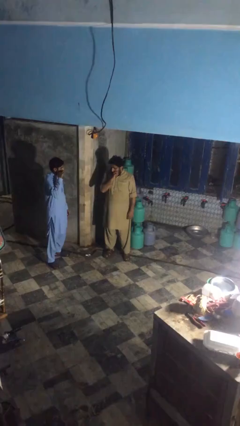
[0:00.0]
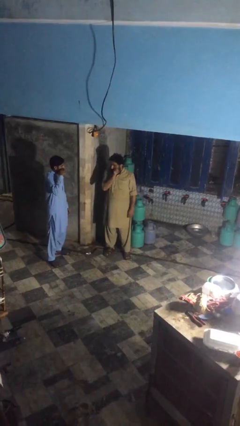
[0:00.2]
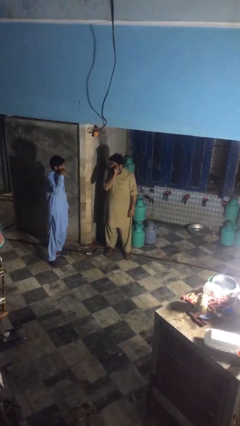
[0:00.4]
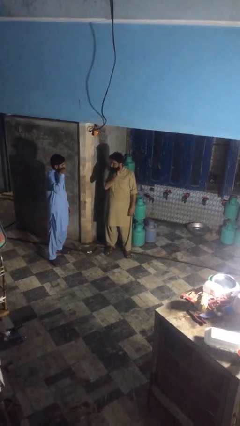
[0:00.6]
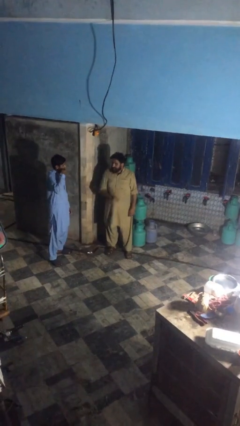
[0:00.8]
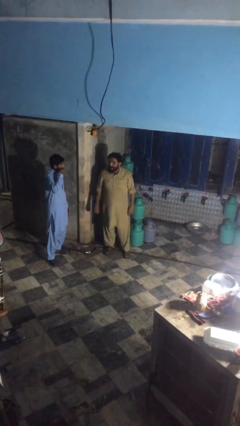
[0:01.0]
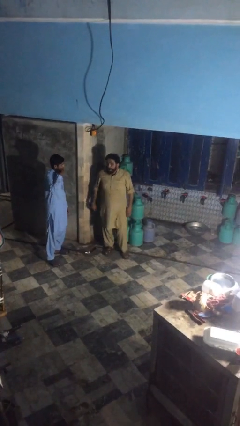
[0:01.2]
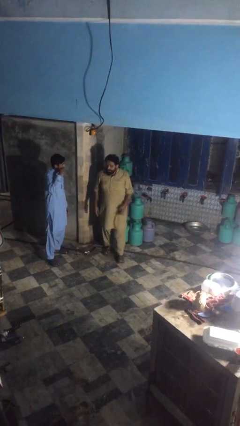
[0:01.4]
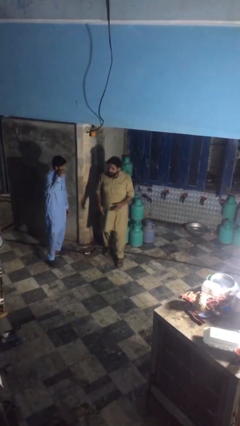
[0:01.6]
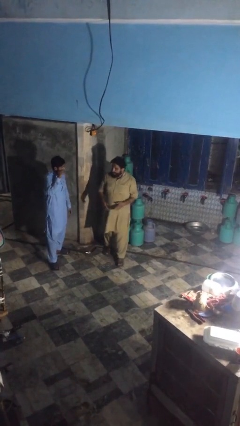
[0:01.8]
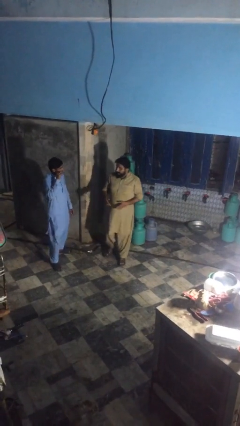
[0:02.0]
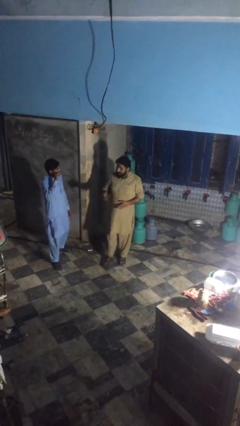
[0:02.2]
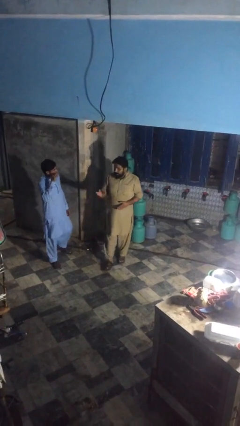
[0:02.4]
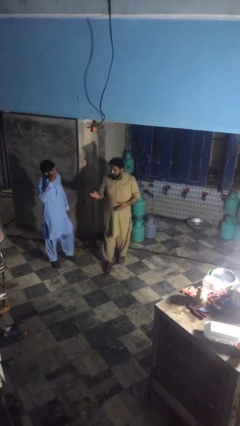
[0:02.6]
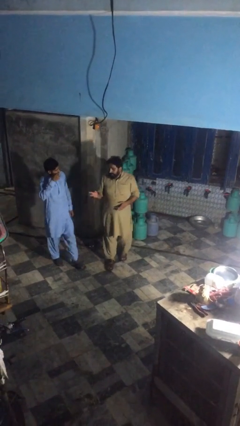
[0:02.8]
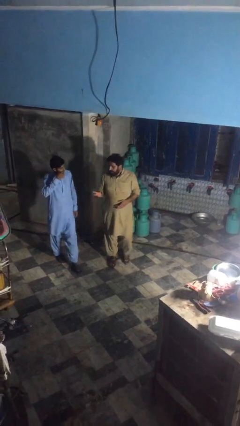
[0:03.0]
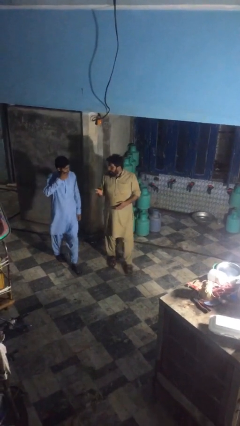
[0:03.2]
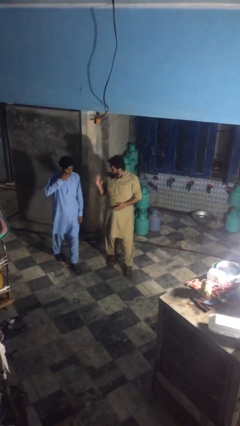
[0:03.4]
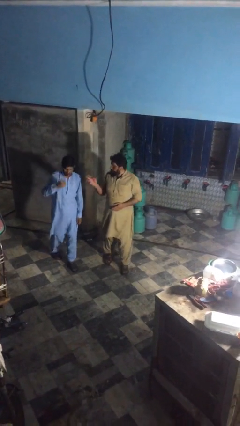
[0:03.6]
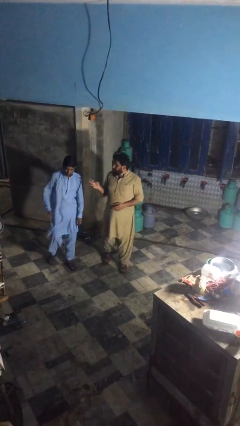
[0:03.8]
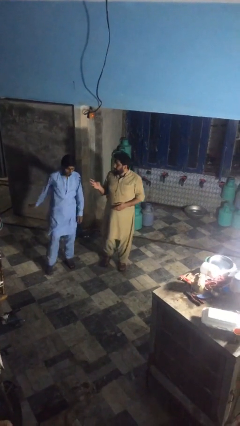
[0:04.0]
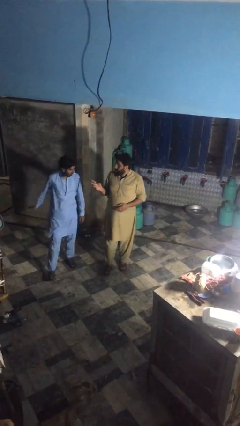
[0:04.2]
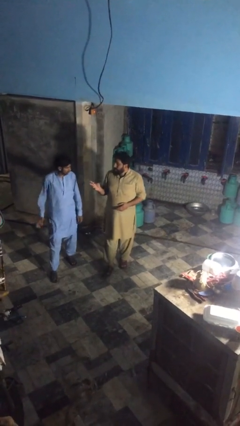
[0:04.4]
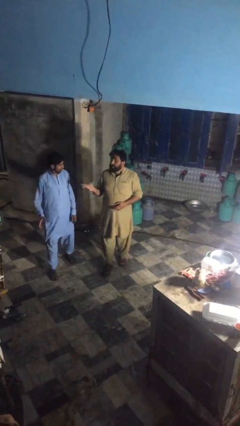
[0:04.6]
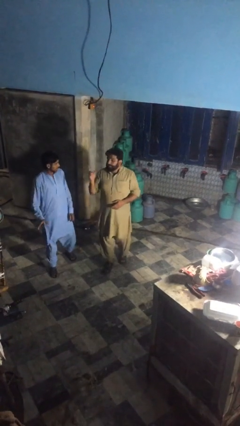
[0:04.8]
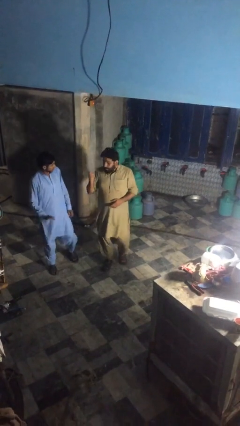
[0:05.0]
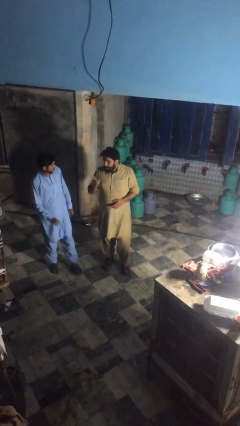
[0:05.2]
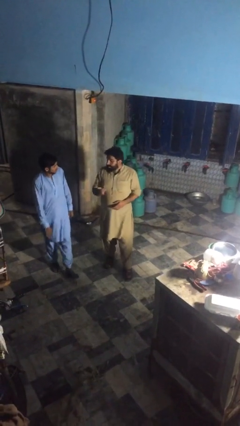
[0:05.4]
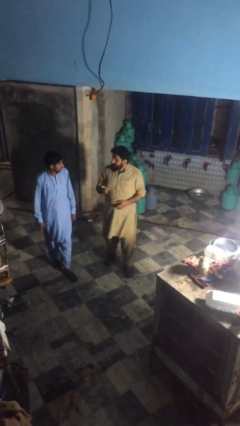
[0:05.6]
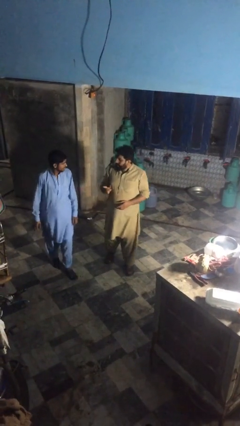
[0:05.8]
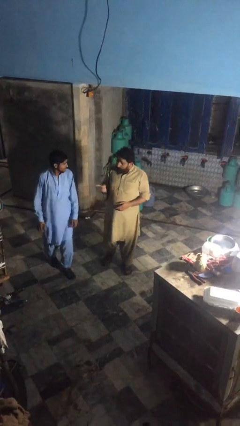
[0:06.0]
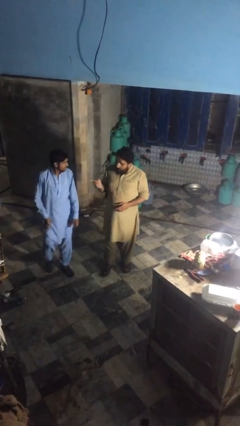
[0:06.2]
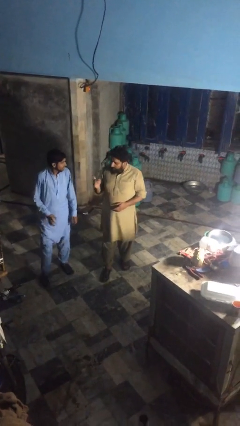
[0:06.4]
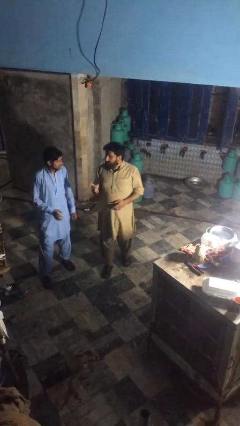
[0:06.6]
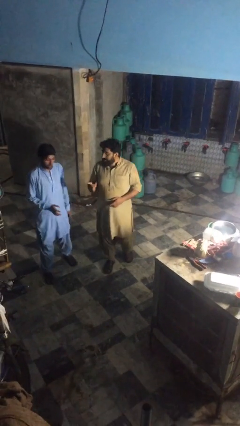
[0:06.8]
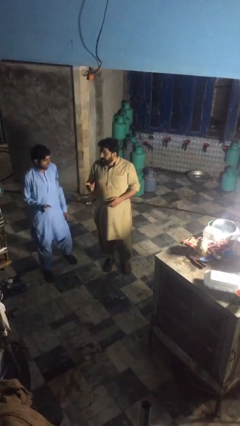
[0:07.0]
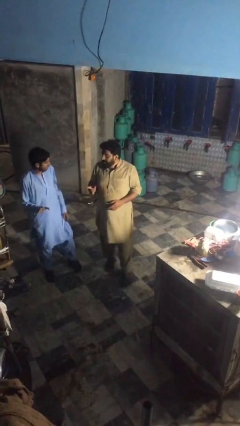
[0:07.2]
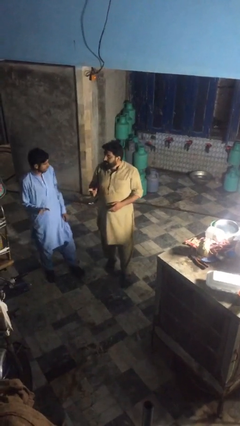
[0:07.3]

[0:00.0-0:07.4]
person talks to person

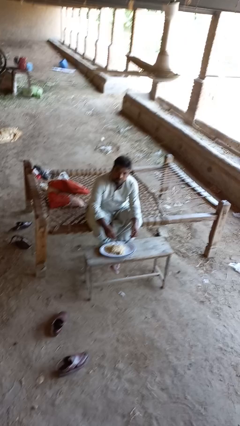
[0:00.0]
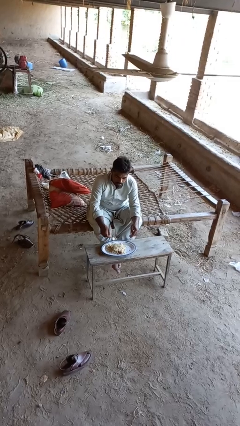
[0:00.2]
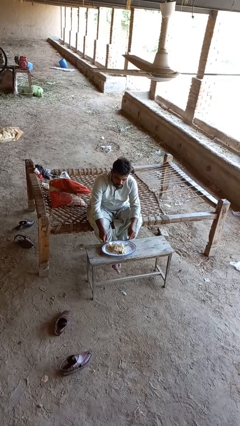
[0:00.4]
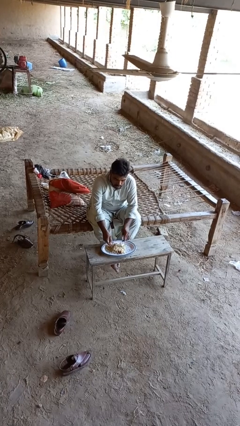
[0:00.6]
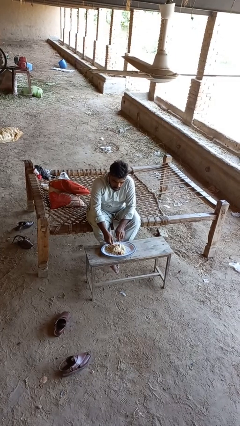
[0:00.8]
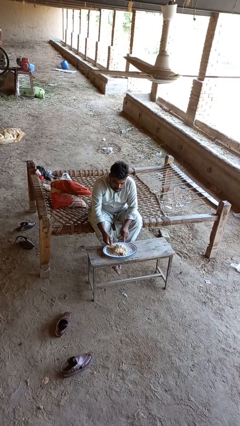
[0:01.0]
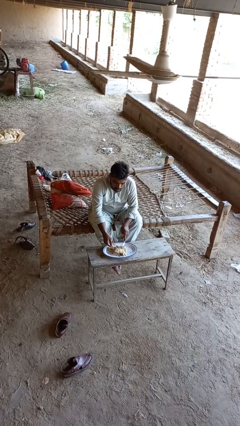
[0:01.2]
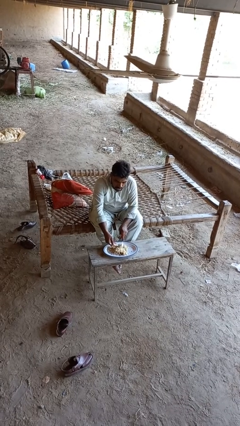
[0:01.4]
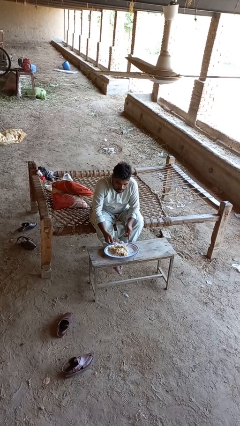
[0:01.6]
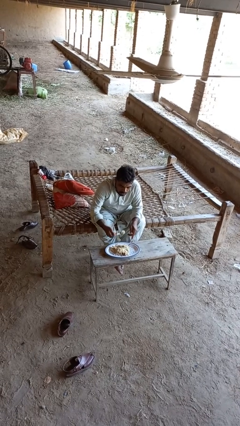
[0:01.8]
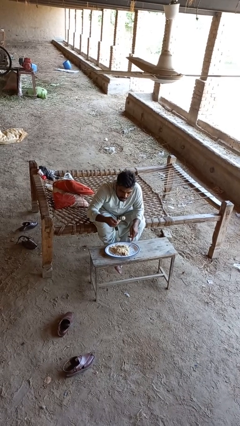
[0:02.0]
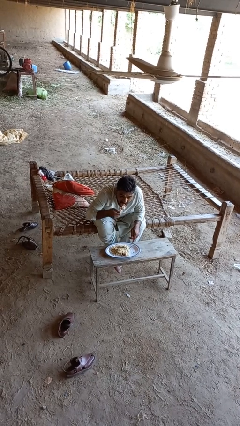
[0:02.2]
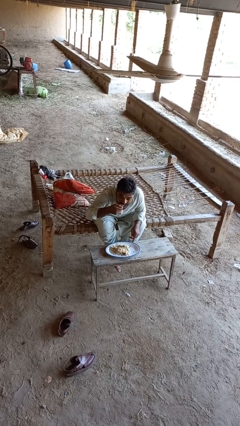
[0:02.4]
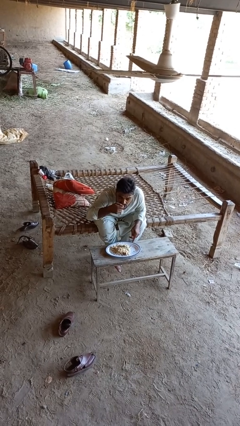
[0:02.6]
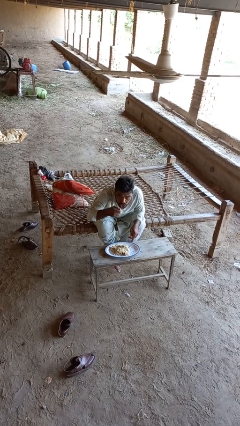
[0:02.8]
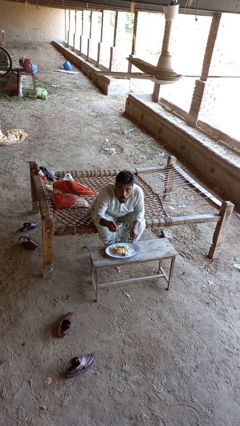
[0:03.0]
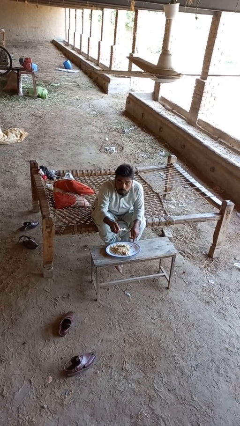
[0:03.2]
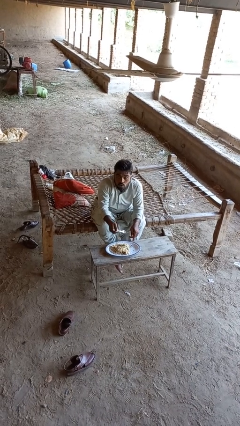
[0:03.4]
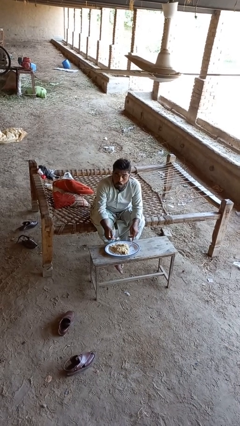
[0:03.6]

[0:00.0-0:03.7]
person eats with utensil

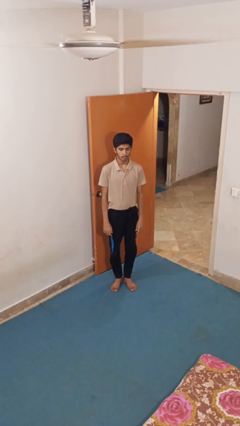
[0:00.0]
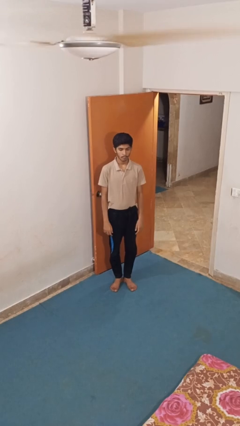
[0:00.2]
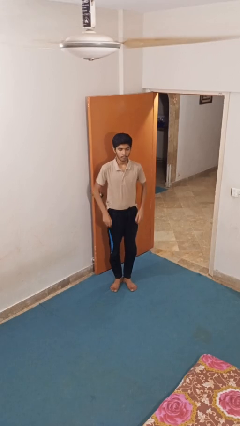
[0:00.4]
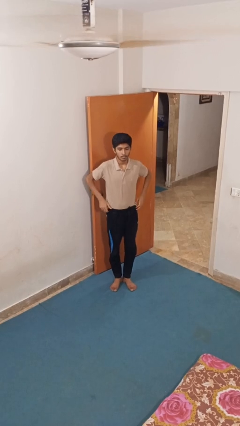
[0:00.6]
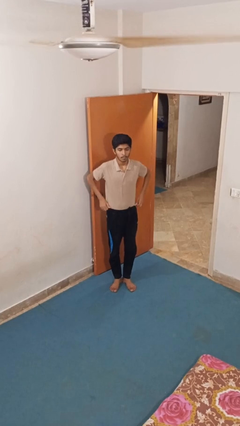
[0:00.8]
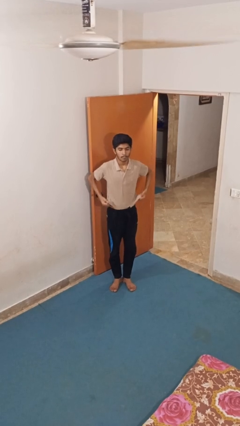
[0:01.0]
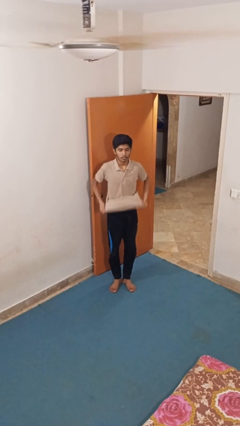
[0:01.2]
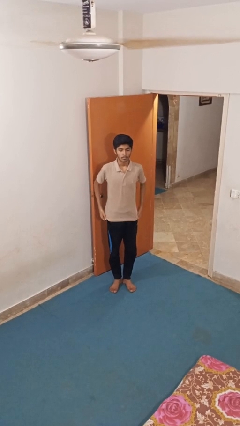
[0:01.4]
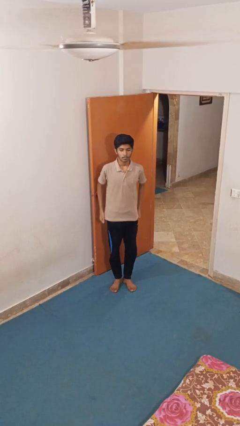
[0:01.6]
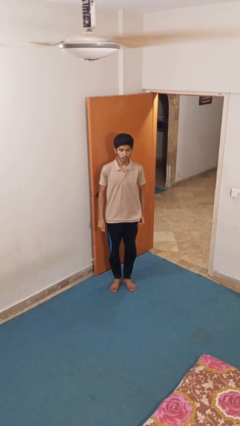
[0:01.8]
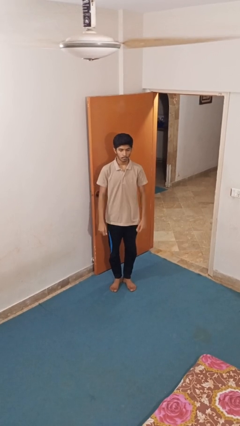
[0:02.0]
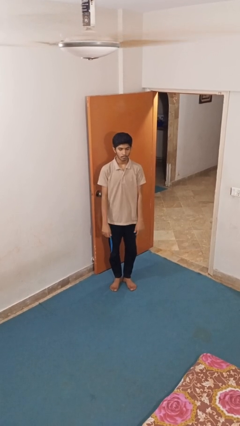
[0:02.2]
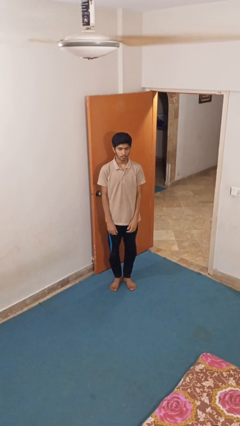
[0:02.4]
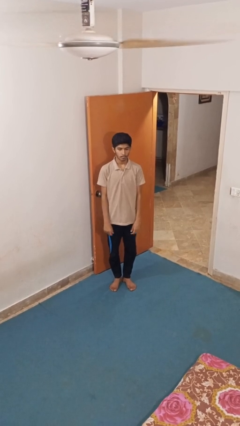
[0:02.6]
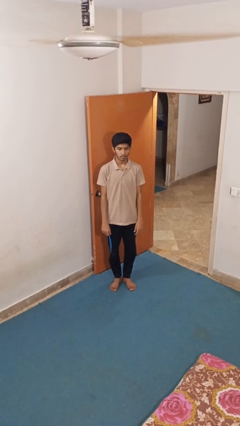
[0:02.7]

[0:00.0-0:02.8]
person untucks shirt

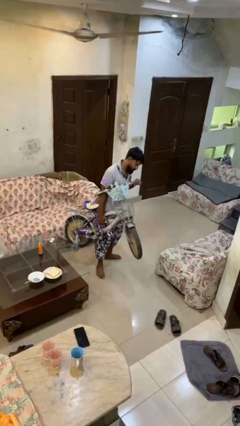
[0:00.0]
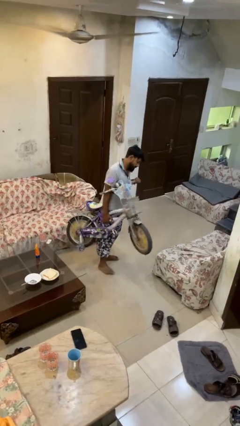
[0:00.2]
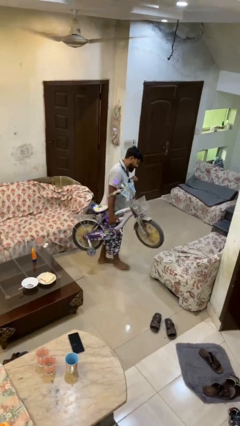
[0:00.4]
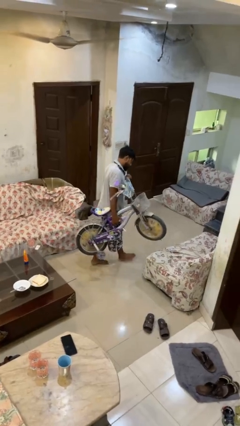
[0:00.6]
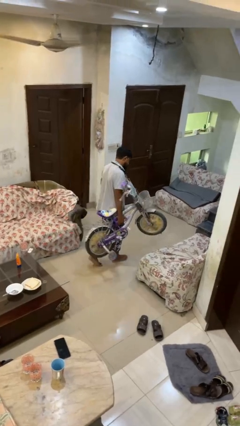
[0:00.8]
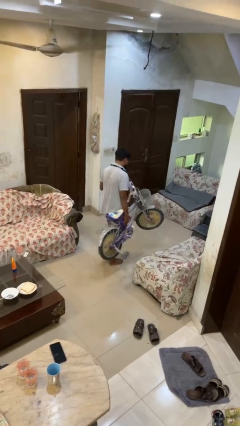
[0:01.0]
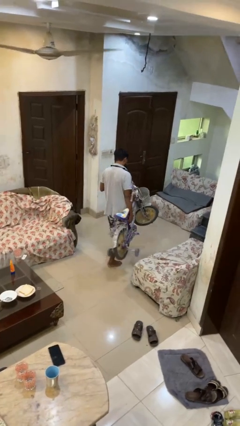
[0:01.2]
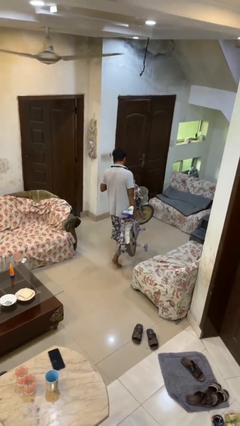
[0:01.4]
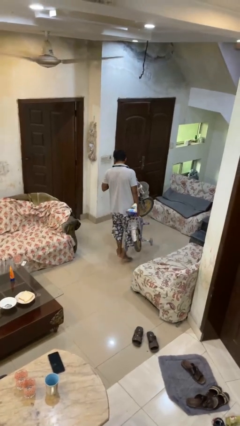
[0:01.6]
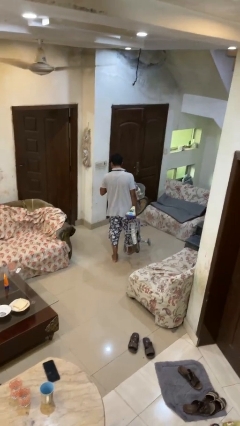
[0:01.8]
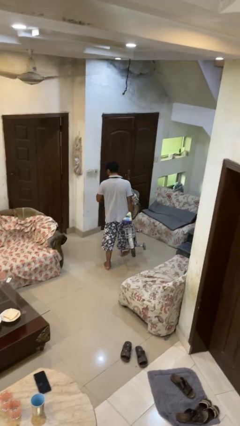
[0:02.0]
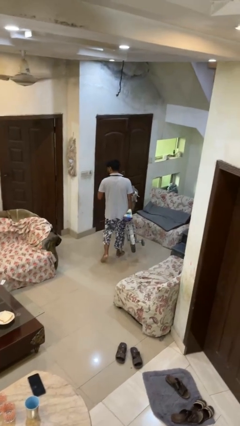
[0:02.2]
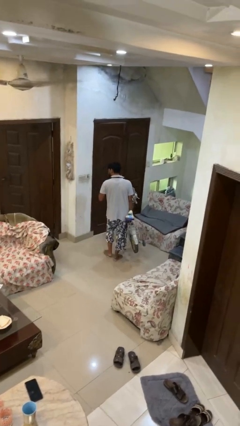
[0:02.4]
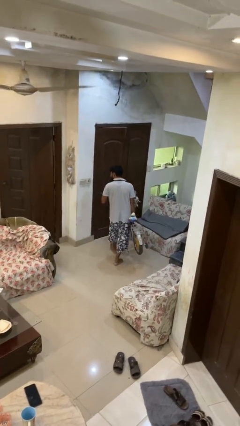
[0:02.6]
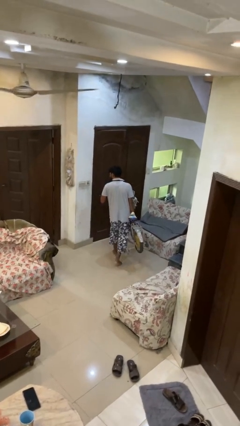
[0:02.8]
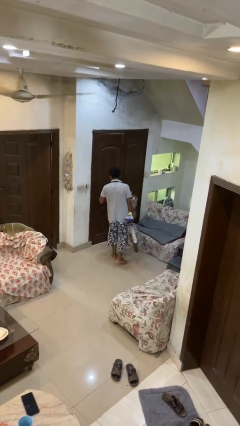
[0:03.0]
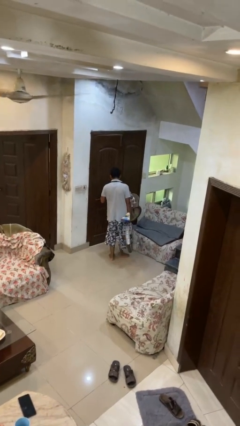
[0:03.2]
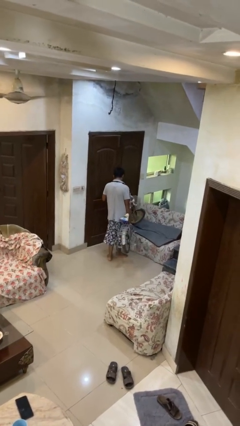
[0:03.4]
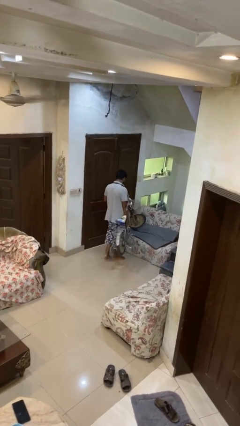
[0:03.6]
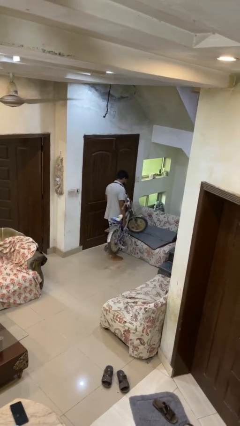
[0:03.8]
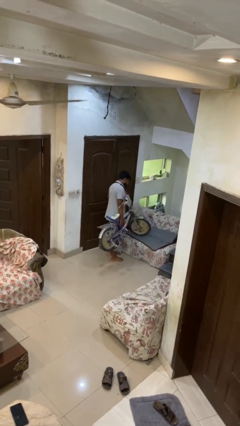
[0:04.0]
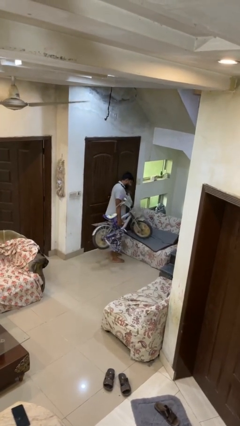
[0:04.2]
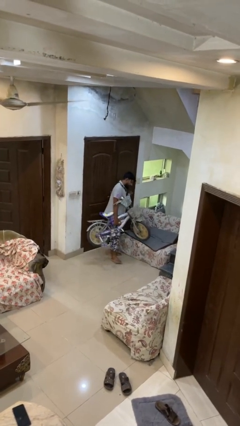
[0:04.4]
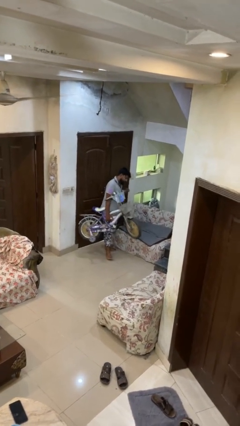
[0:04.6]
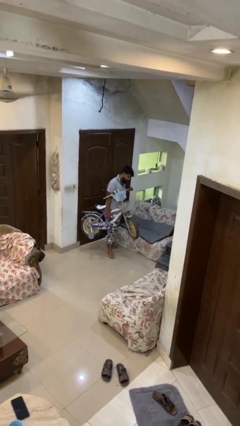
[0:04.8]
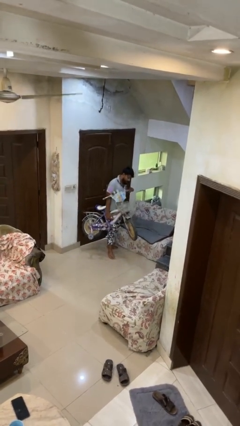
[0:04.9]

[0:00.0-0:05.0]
person carries bicycle
